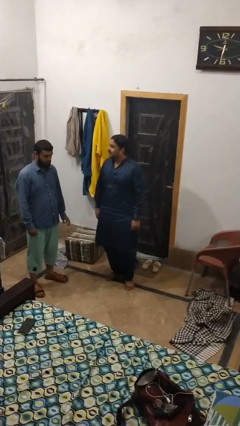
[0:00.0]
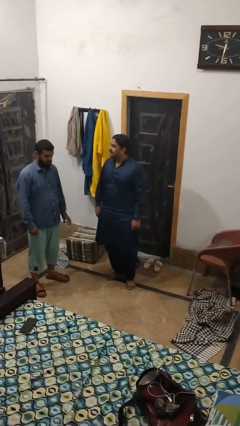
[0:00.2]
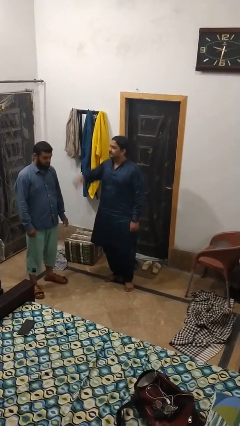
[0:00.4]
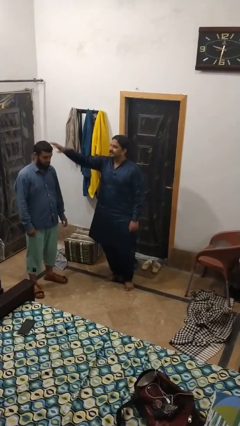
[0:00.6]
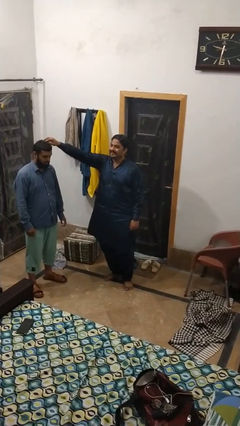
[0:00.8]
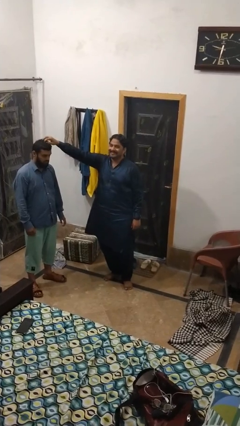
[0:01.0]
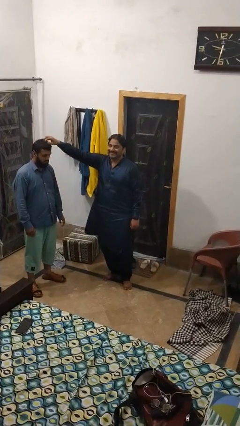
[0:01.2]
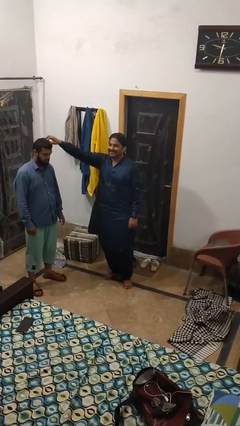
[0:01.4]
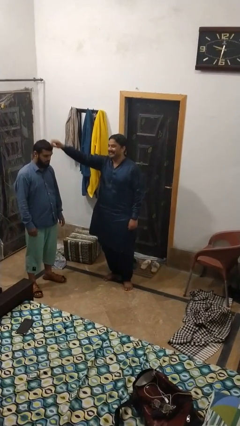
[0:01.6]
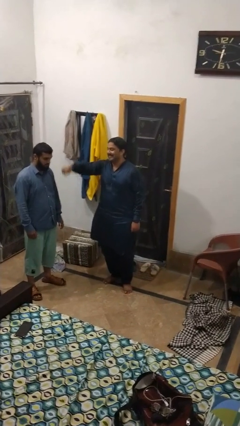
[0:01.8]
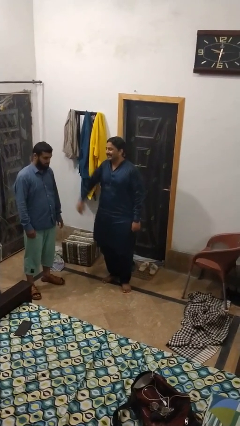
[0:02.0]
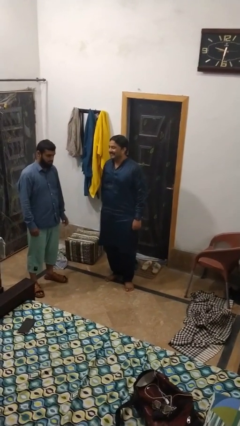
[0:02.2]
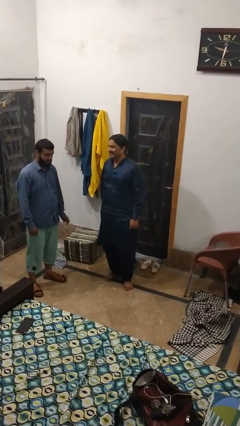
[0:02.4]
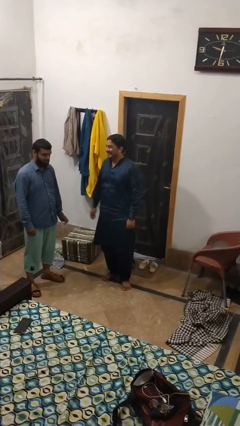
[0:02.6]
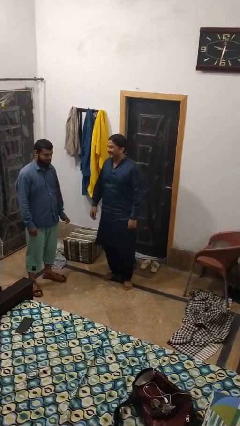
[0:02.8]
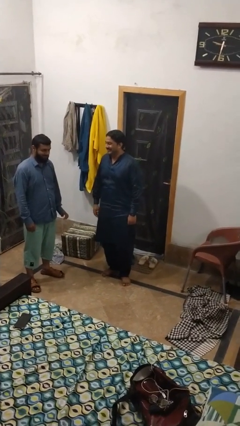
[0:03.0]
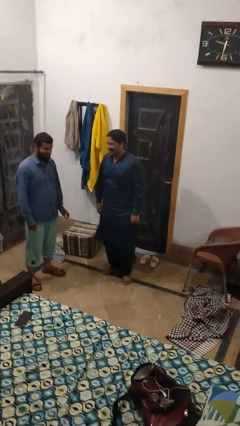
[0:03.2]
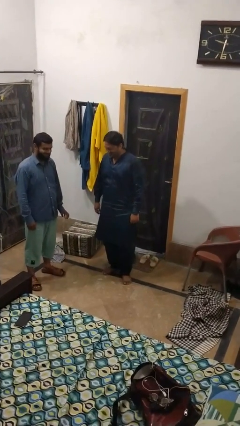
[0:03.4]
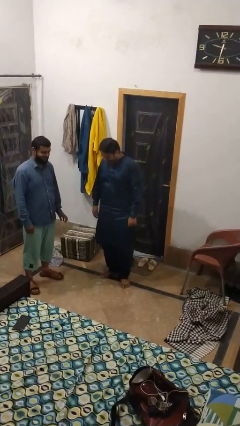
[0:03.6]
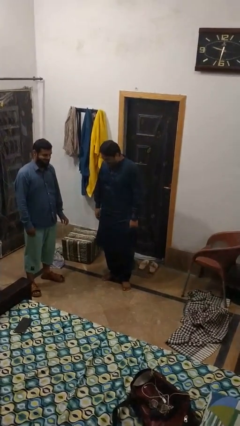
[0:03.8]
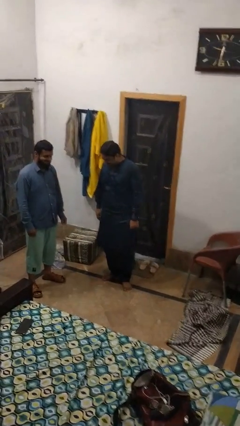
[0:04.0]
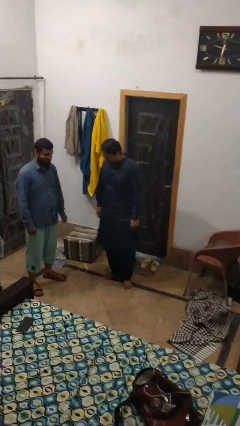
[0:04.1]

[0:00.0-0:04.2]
person grabs person by hair

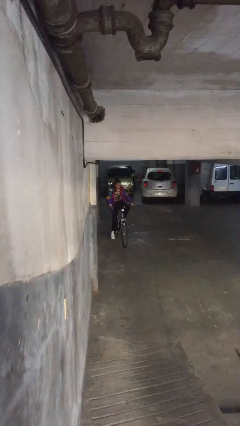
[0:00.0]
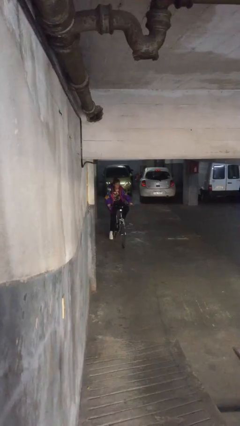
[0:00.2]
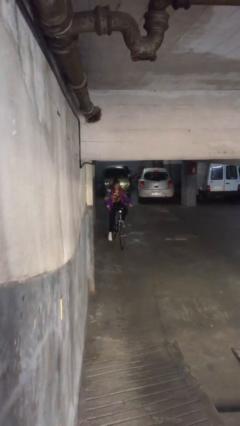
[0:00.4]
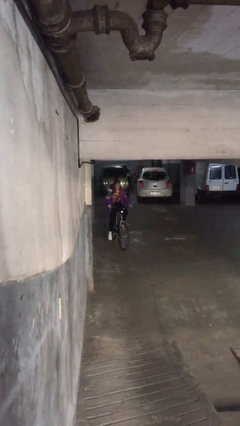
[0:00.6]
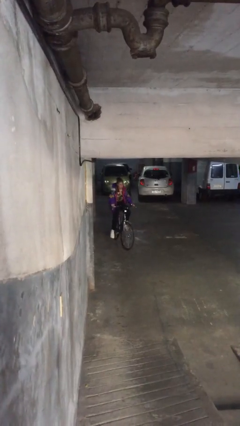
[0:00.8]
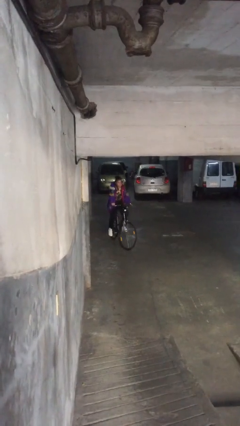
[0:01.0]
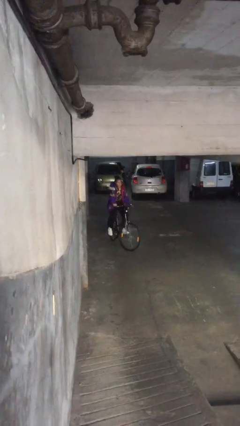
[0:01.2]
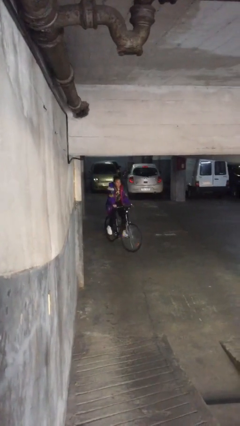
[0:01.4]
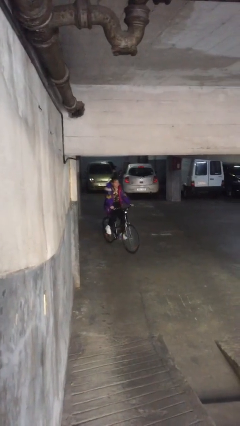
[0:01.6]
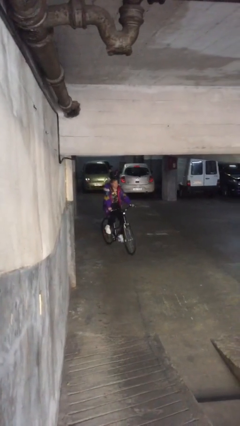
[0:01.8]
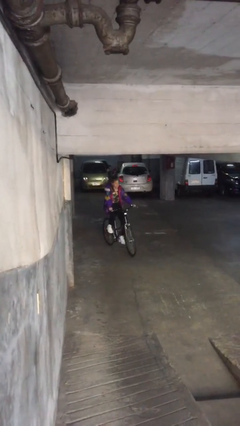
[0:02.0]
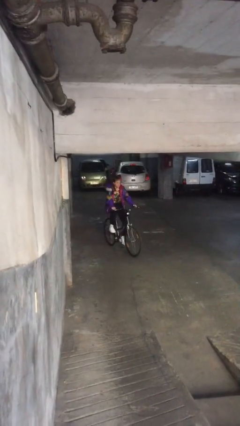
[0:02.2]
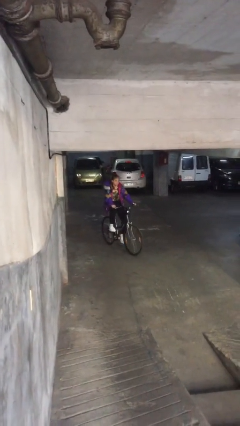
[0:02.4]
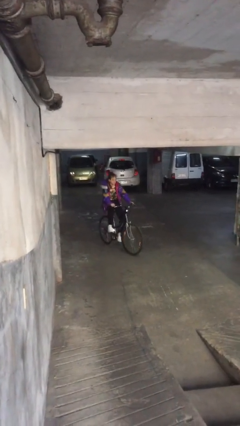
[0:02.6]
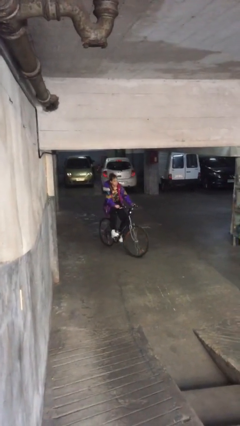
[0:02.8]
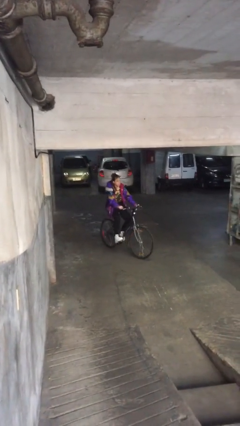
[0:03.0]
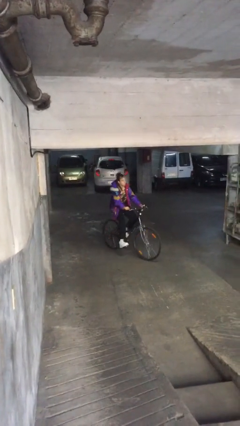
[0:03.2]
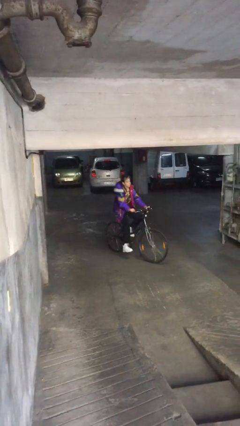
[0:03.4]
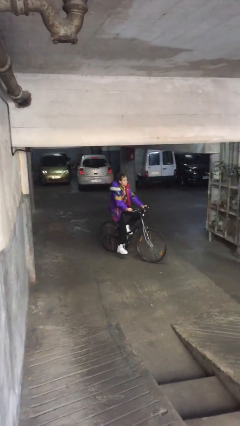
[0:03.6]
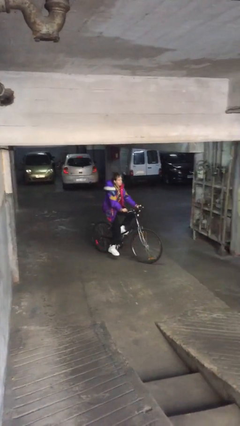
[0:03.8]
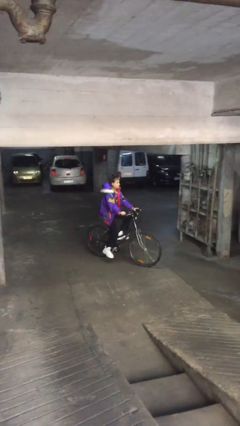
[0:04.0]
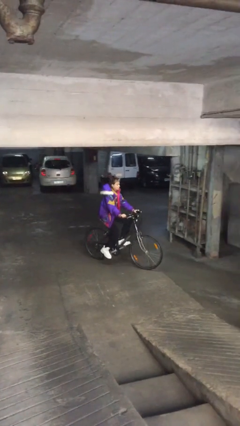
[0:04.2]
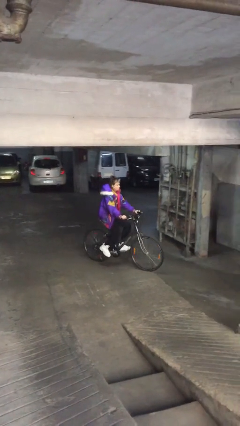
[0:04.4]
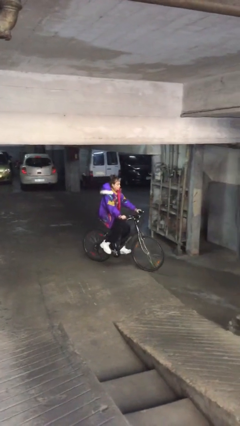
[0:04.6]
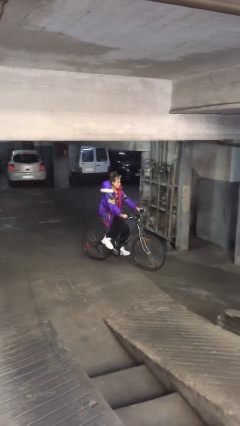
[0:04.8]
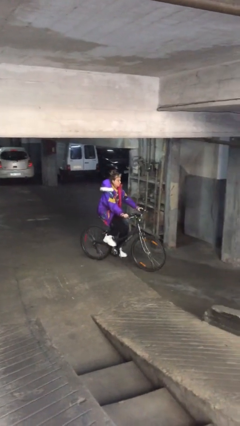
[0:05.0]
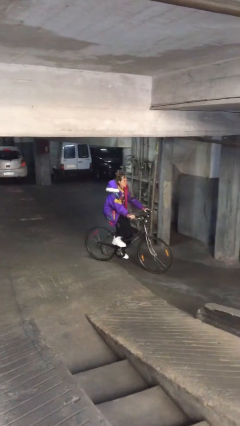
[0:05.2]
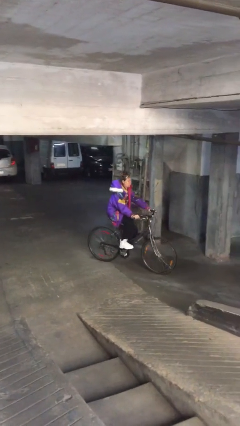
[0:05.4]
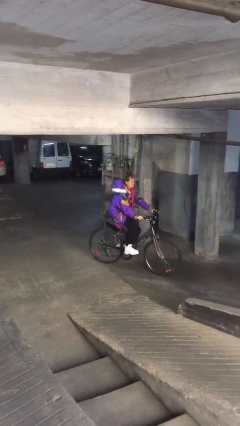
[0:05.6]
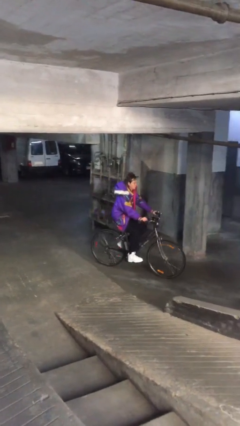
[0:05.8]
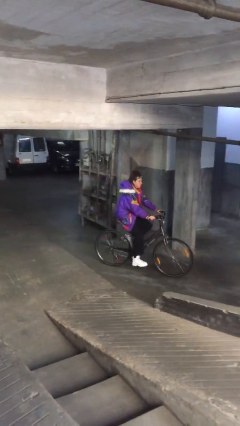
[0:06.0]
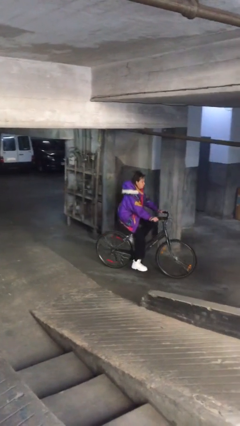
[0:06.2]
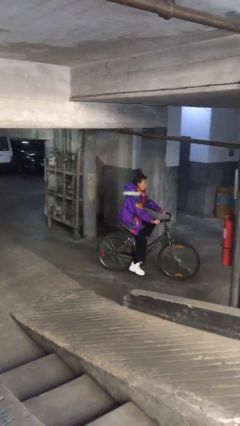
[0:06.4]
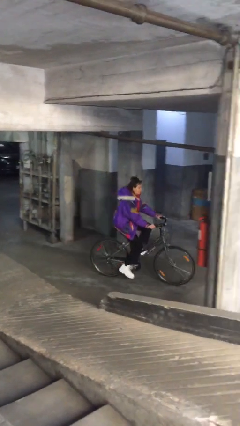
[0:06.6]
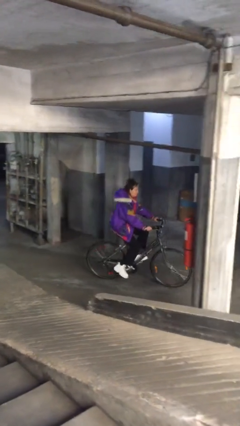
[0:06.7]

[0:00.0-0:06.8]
person rides bicycle

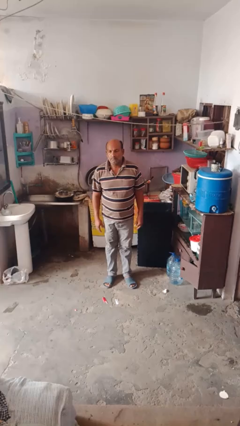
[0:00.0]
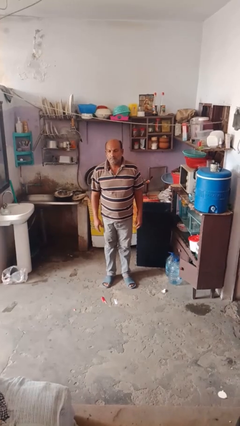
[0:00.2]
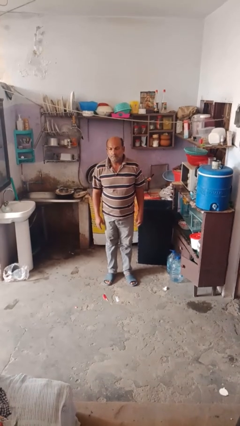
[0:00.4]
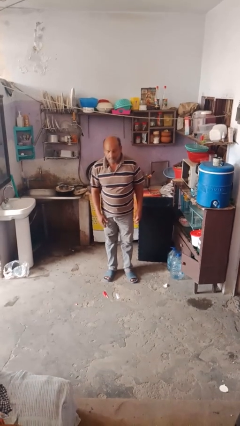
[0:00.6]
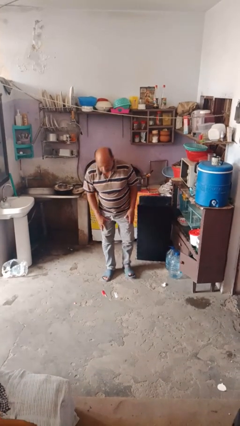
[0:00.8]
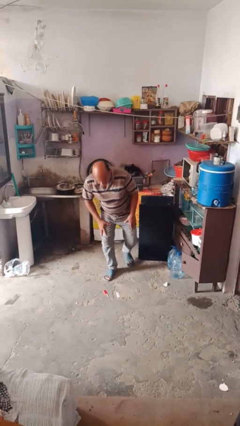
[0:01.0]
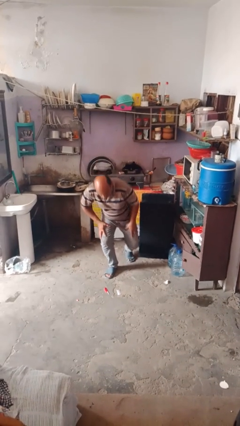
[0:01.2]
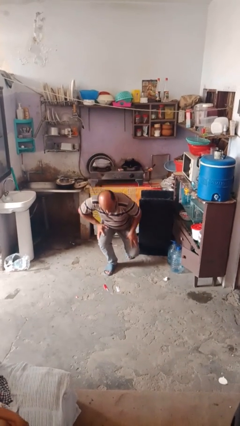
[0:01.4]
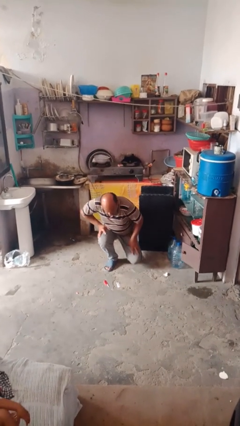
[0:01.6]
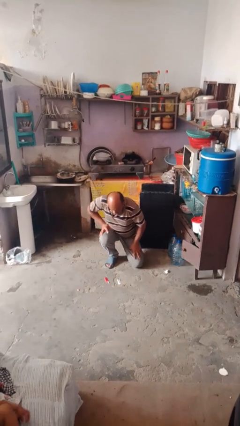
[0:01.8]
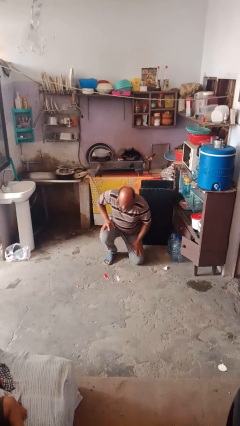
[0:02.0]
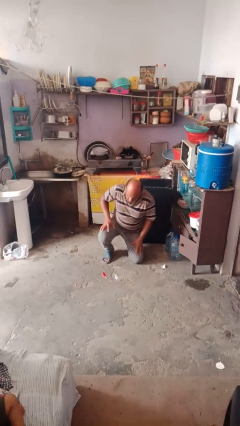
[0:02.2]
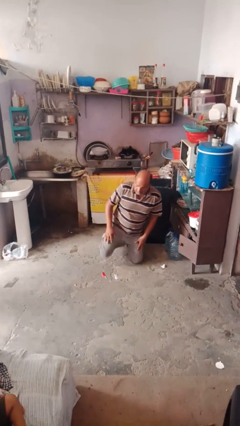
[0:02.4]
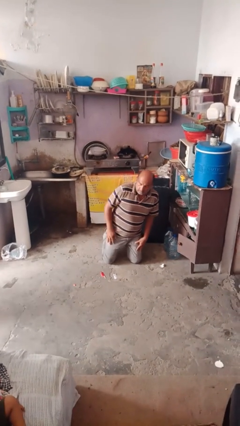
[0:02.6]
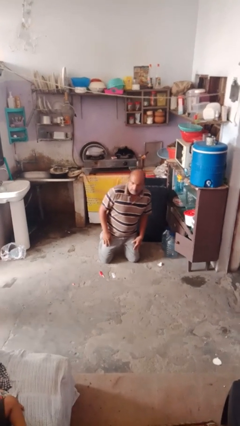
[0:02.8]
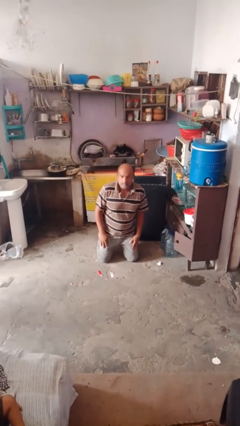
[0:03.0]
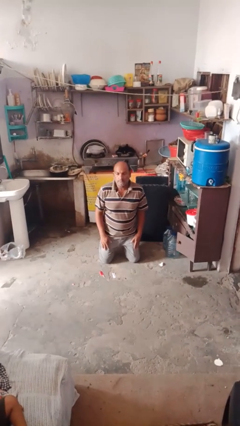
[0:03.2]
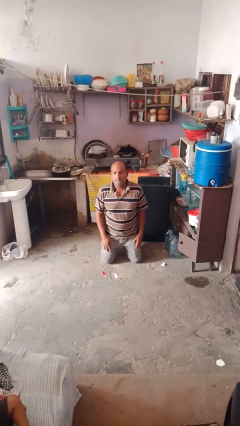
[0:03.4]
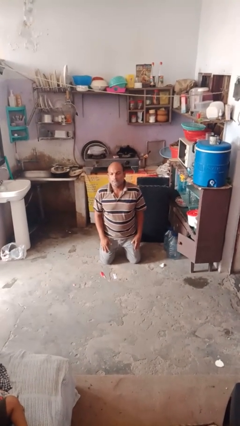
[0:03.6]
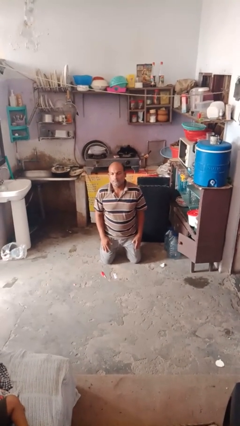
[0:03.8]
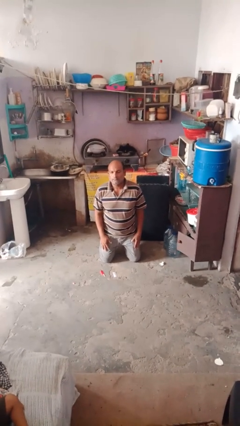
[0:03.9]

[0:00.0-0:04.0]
person kneels

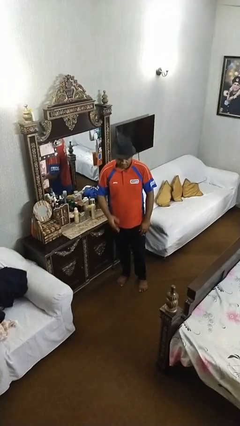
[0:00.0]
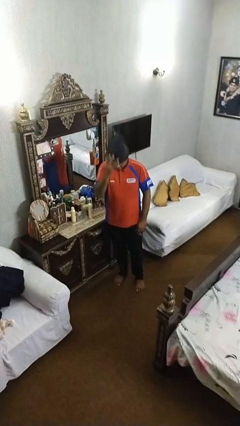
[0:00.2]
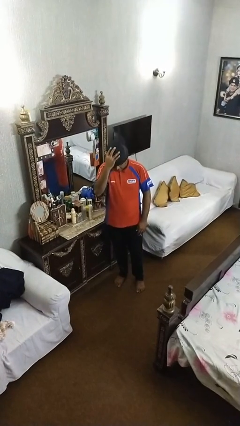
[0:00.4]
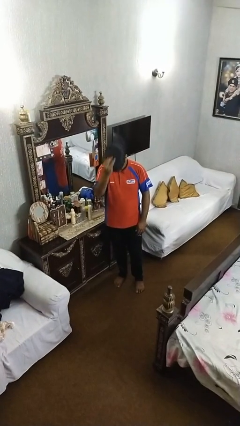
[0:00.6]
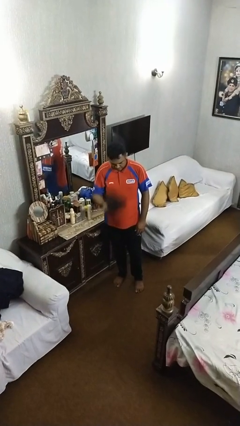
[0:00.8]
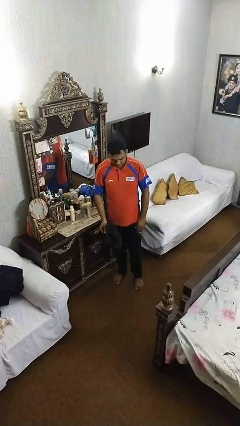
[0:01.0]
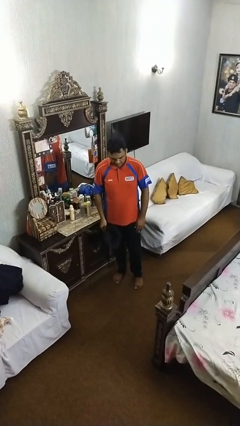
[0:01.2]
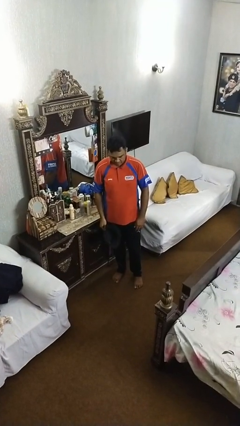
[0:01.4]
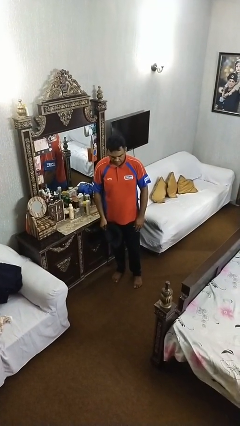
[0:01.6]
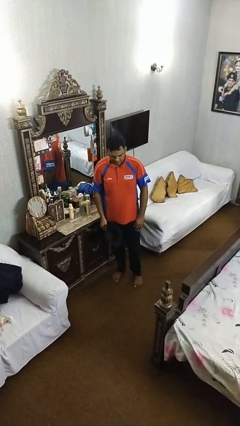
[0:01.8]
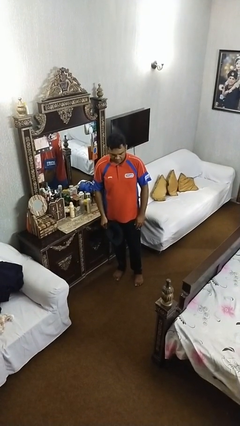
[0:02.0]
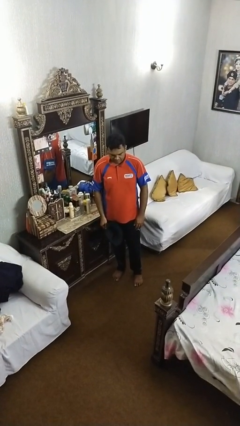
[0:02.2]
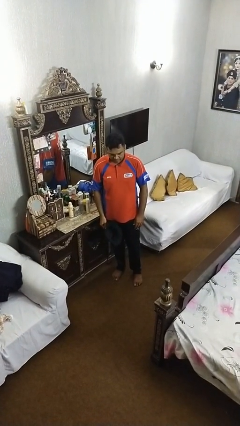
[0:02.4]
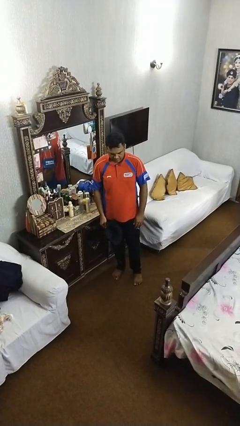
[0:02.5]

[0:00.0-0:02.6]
person takes off hat

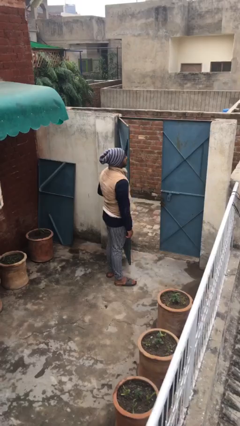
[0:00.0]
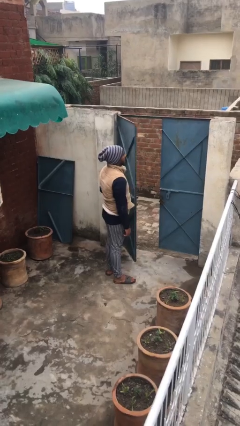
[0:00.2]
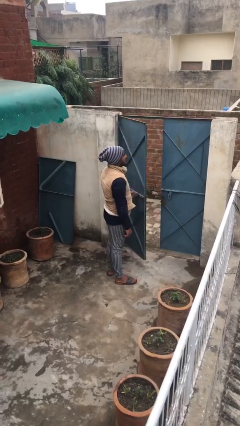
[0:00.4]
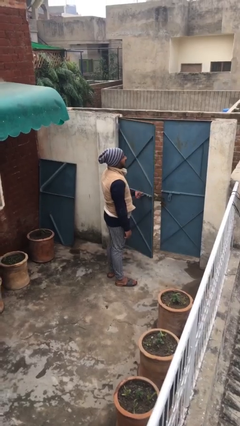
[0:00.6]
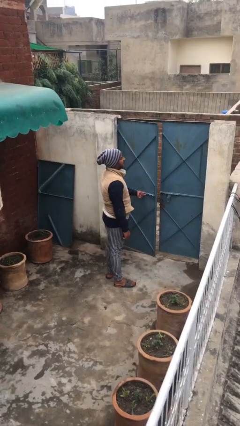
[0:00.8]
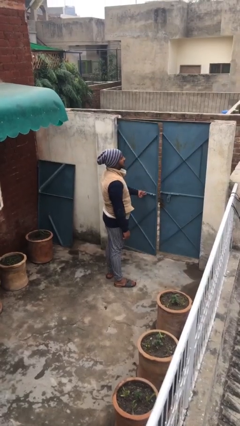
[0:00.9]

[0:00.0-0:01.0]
person closes facility door
